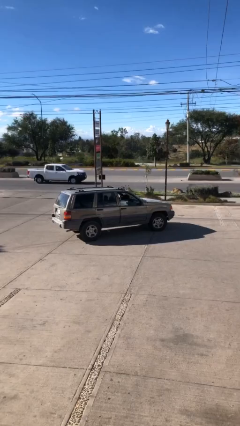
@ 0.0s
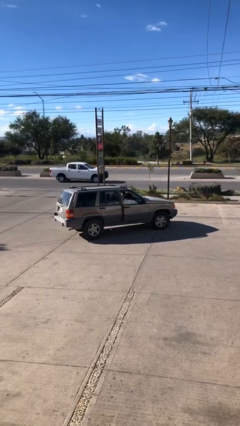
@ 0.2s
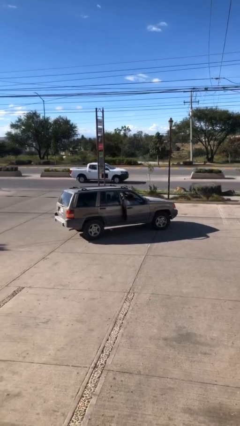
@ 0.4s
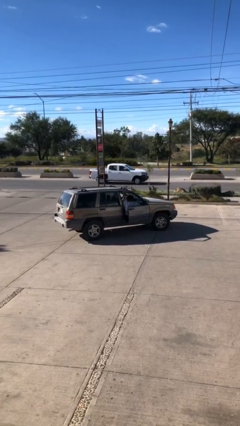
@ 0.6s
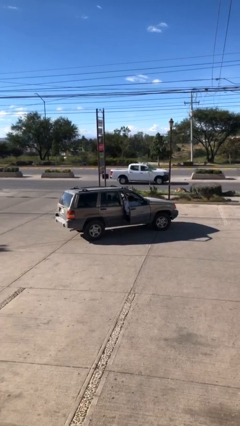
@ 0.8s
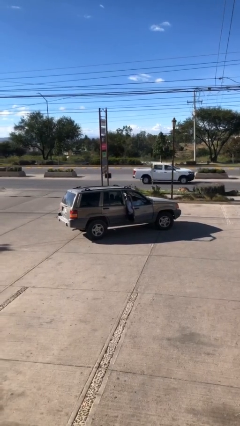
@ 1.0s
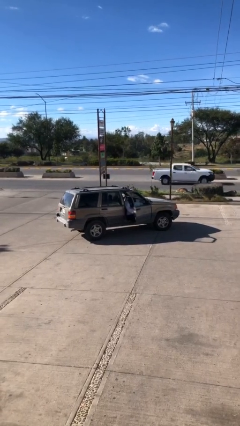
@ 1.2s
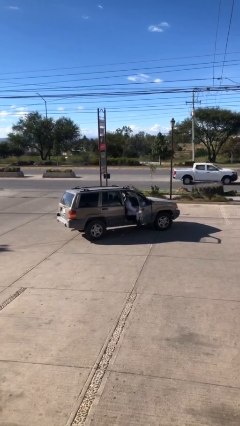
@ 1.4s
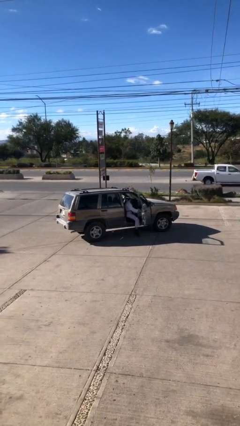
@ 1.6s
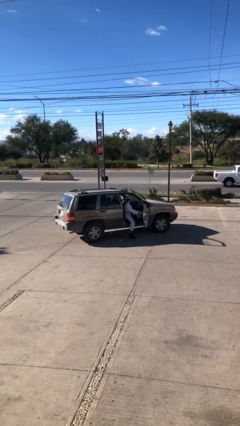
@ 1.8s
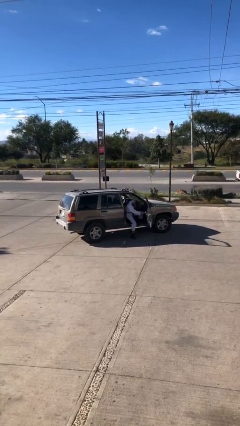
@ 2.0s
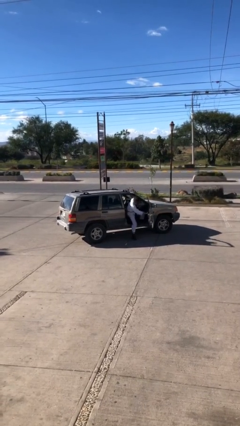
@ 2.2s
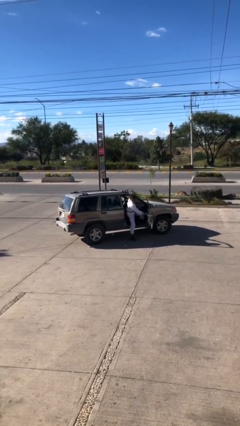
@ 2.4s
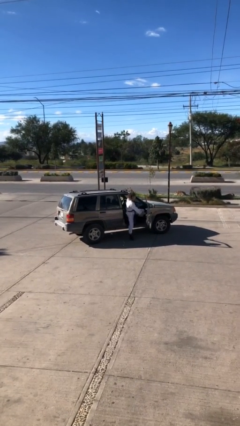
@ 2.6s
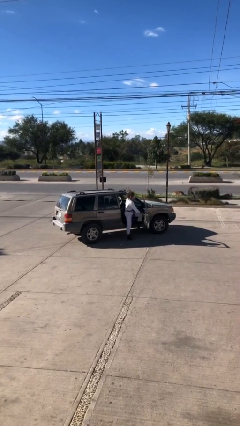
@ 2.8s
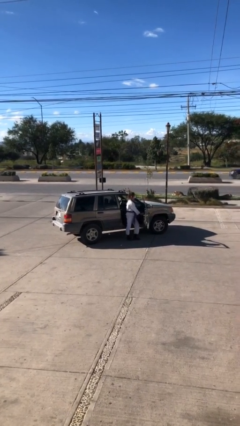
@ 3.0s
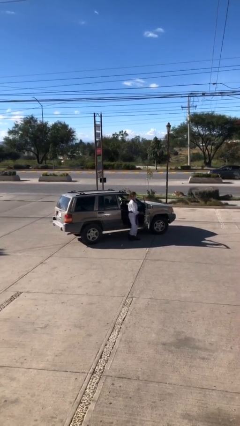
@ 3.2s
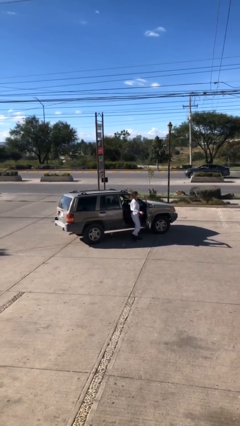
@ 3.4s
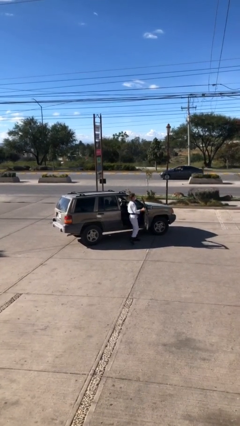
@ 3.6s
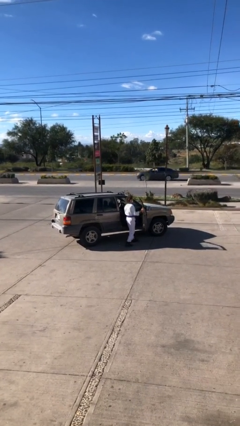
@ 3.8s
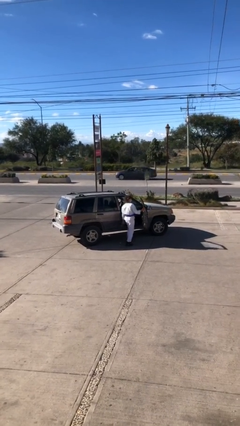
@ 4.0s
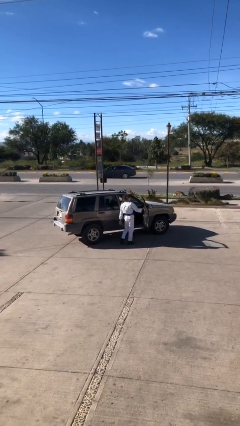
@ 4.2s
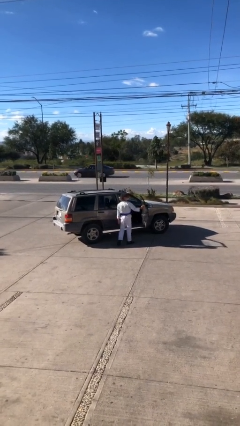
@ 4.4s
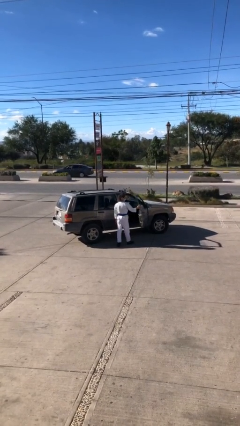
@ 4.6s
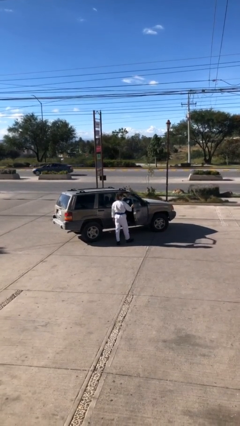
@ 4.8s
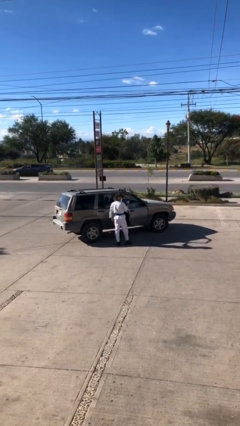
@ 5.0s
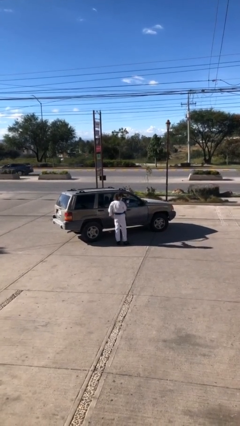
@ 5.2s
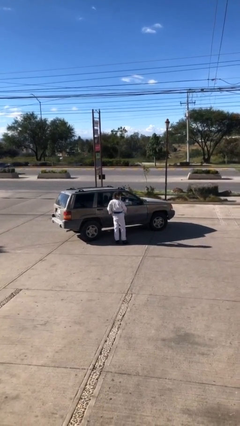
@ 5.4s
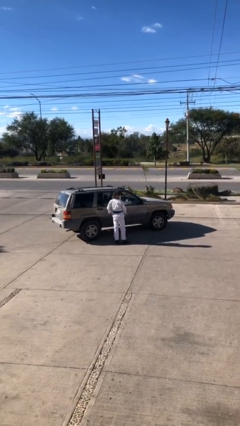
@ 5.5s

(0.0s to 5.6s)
car drops off person

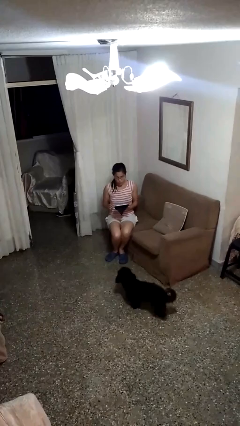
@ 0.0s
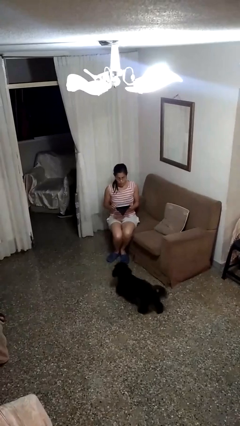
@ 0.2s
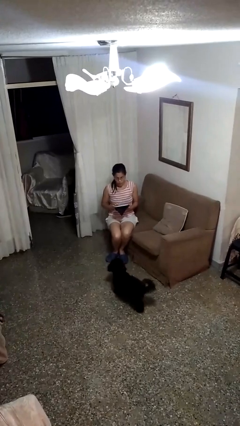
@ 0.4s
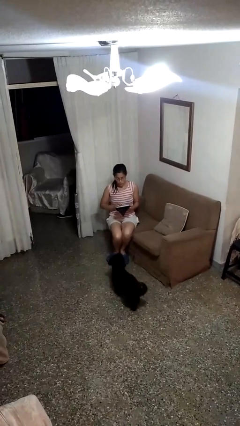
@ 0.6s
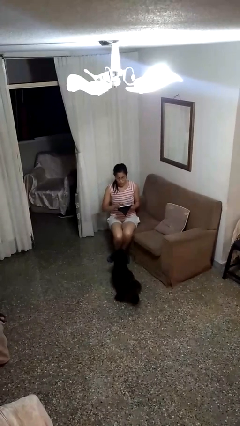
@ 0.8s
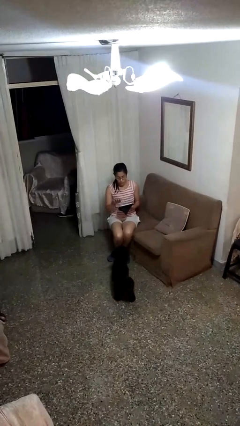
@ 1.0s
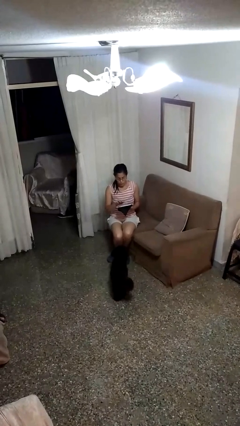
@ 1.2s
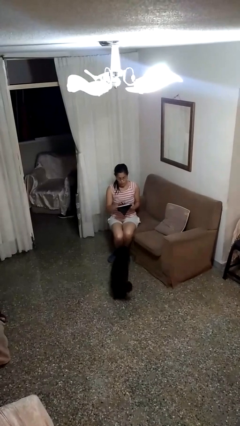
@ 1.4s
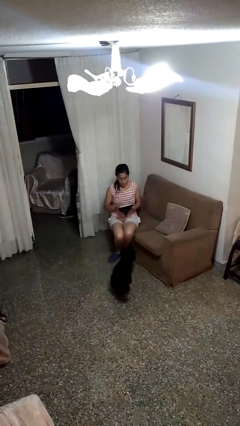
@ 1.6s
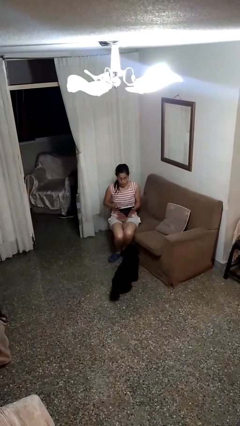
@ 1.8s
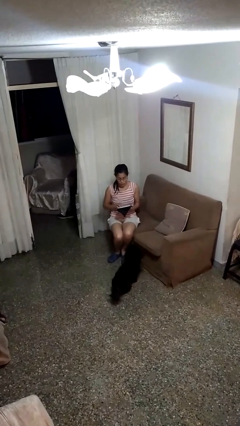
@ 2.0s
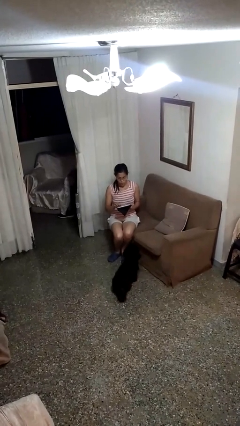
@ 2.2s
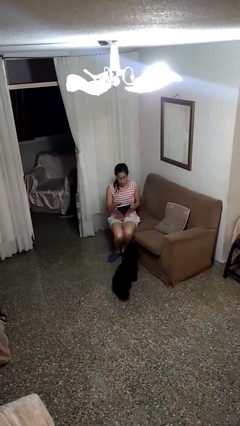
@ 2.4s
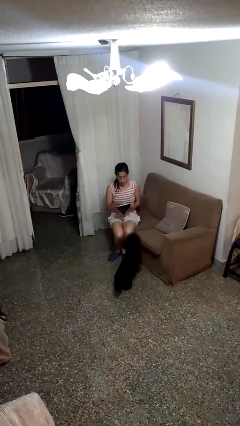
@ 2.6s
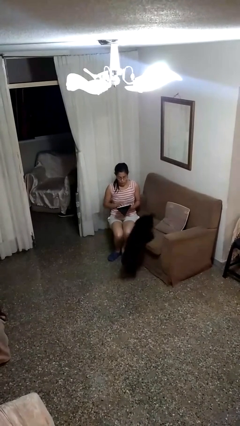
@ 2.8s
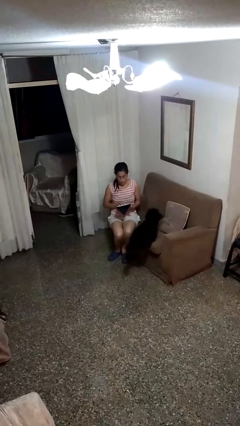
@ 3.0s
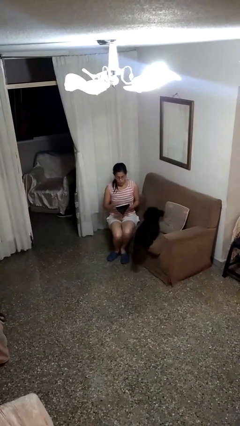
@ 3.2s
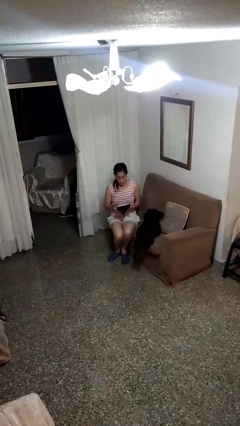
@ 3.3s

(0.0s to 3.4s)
person interacts with tablet

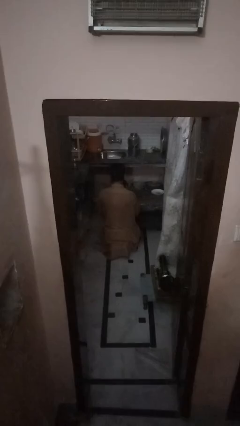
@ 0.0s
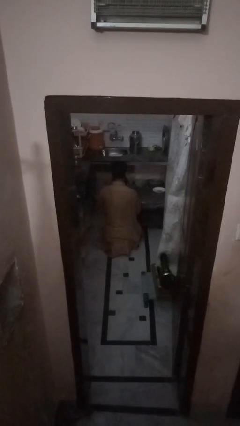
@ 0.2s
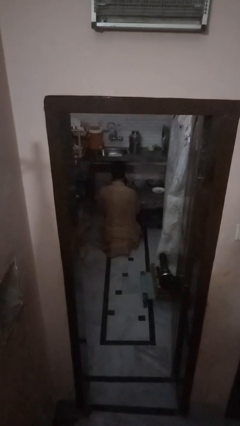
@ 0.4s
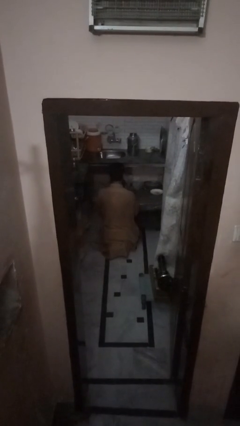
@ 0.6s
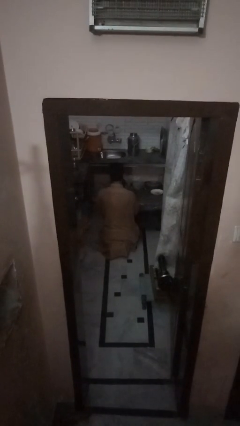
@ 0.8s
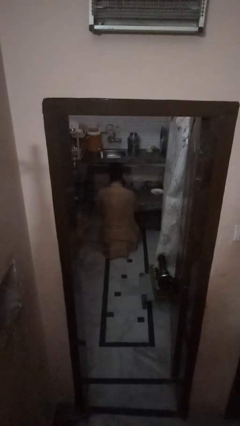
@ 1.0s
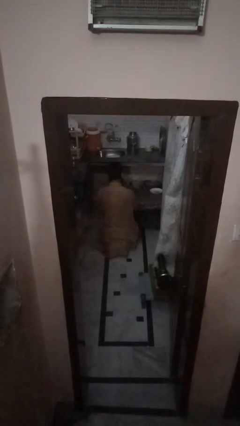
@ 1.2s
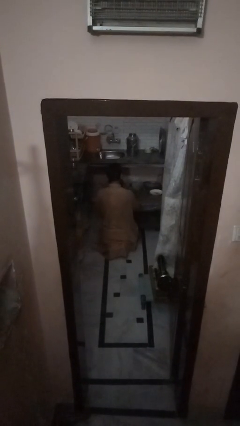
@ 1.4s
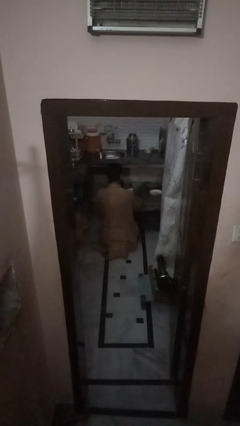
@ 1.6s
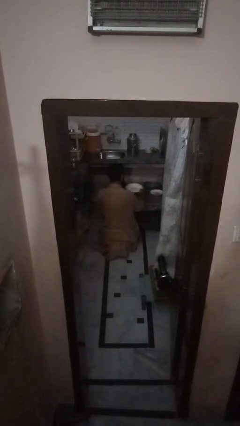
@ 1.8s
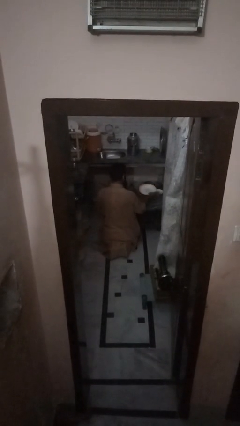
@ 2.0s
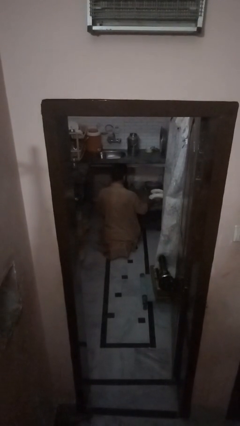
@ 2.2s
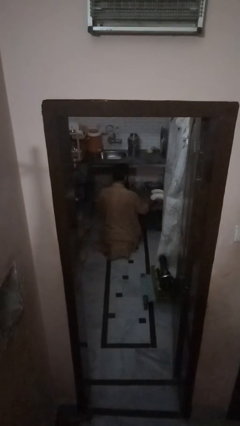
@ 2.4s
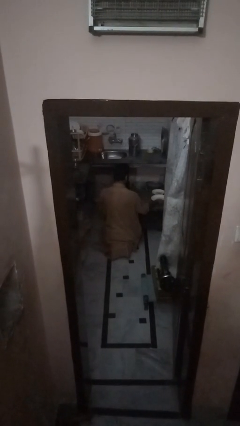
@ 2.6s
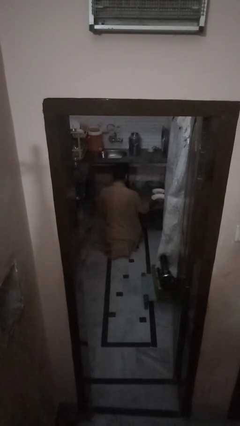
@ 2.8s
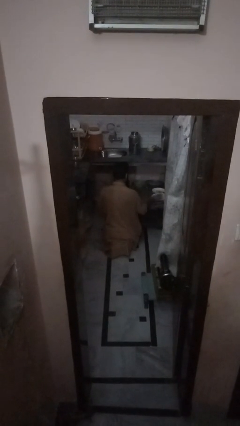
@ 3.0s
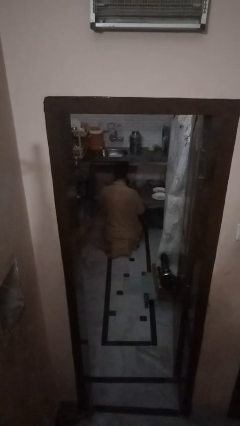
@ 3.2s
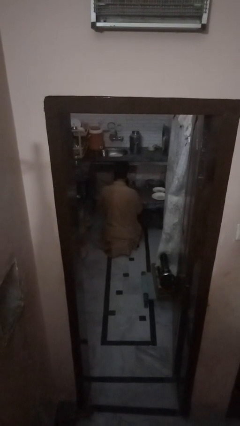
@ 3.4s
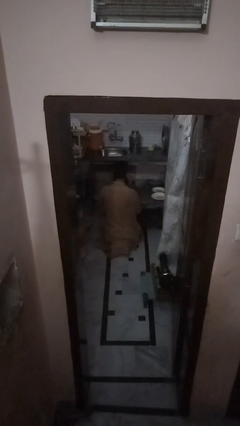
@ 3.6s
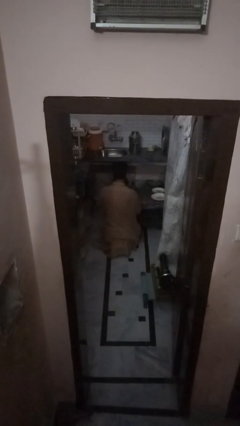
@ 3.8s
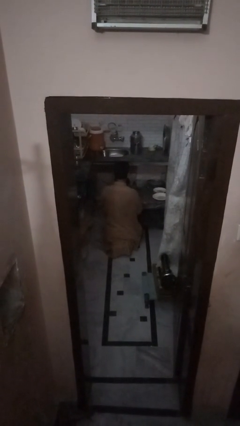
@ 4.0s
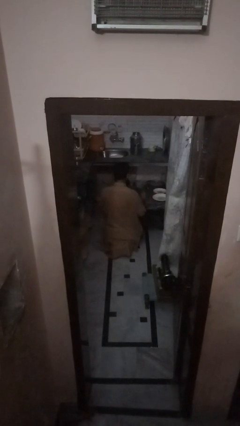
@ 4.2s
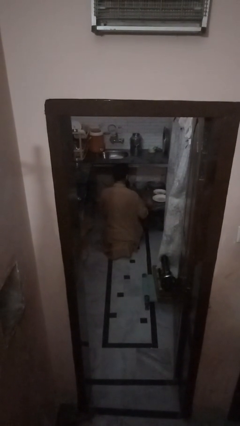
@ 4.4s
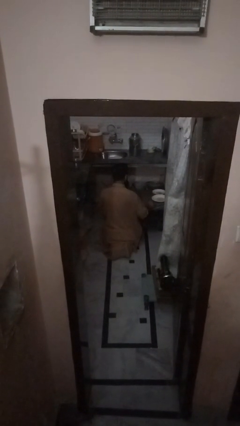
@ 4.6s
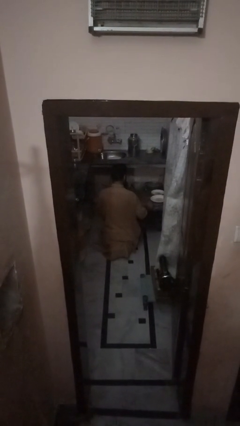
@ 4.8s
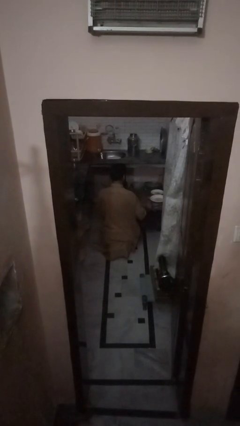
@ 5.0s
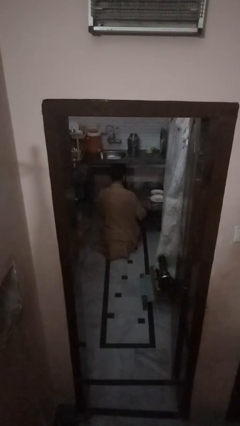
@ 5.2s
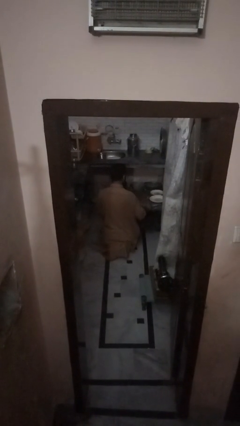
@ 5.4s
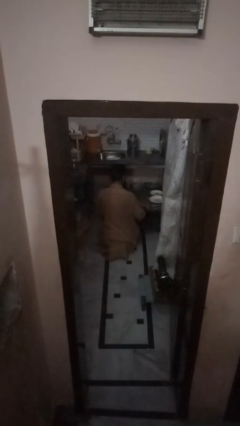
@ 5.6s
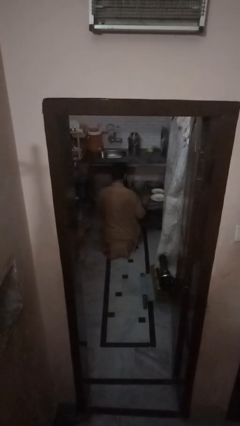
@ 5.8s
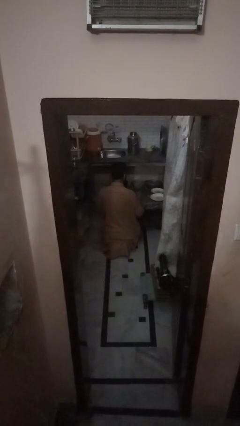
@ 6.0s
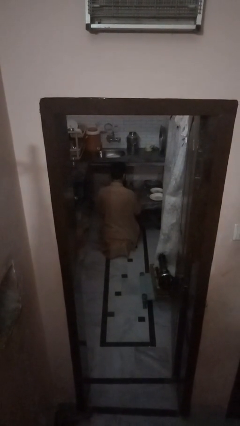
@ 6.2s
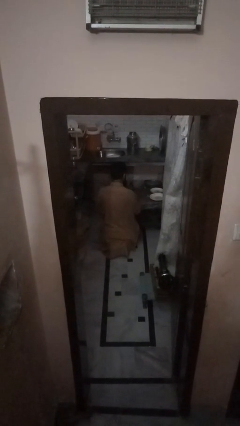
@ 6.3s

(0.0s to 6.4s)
person sets table

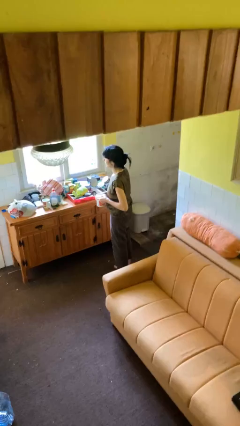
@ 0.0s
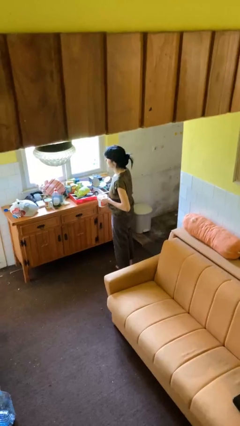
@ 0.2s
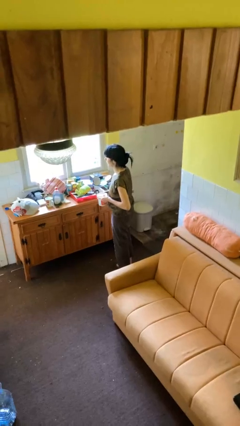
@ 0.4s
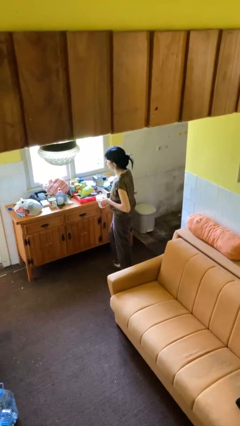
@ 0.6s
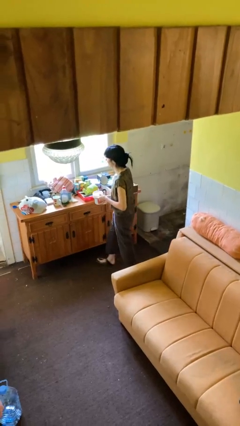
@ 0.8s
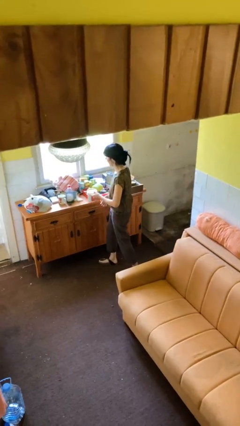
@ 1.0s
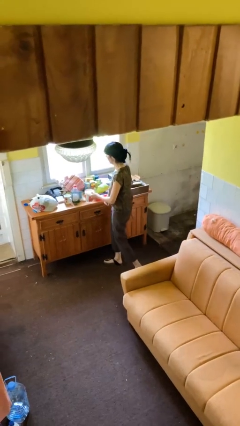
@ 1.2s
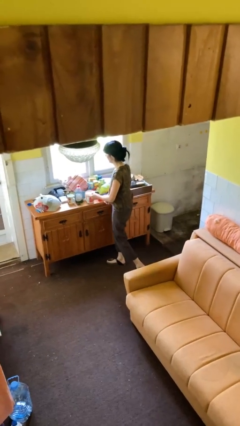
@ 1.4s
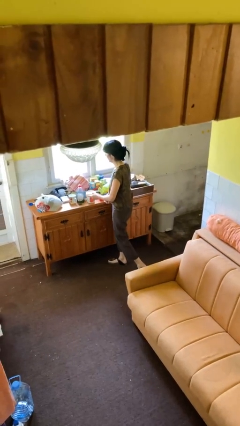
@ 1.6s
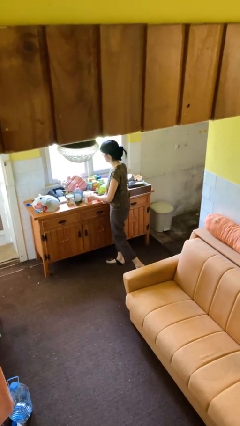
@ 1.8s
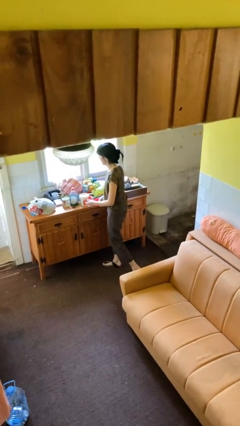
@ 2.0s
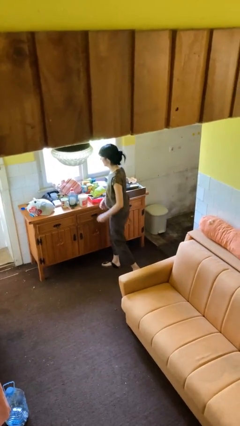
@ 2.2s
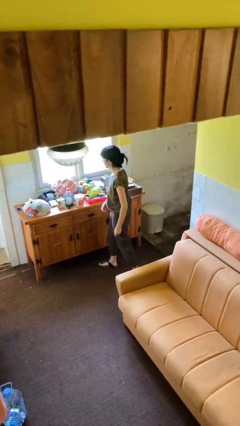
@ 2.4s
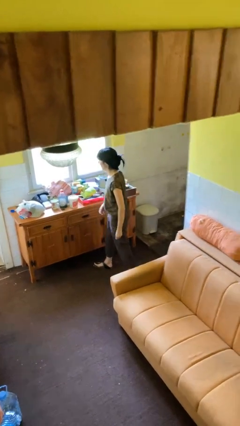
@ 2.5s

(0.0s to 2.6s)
person puts down object on countertop
